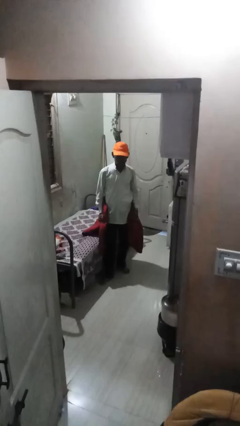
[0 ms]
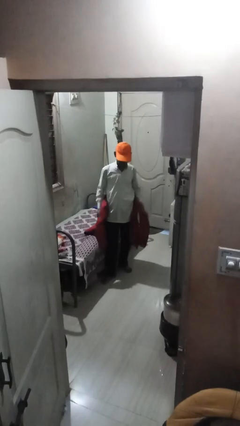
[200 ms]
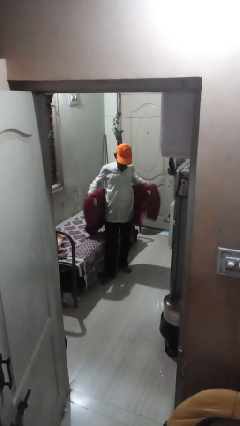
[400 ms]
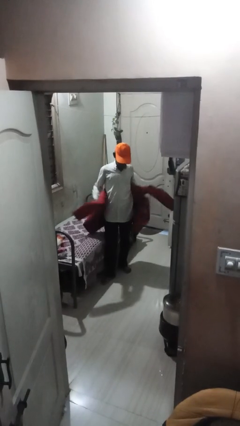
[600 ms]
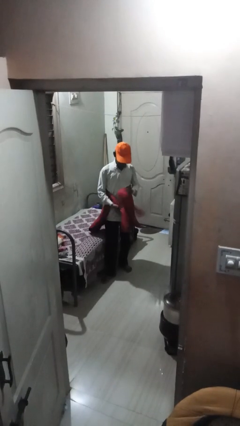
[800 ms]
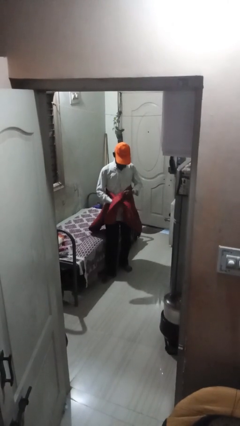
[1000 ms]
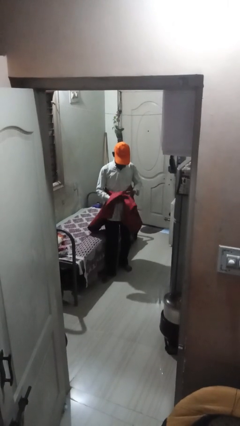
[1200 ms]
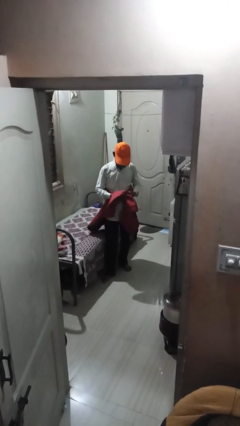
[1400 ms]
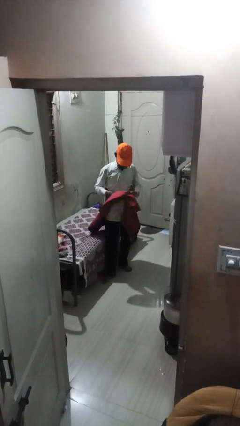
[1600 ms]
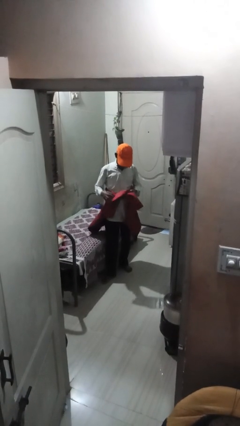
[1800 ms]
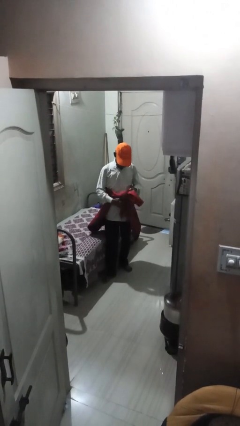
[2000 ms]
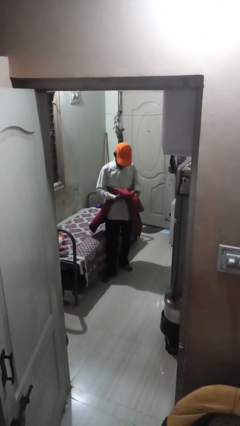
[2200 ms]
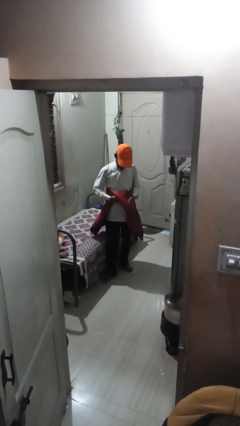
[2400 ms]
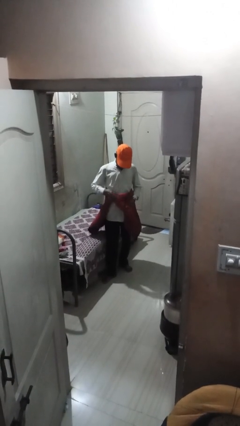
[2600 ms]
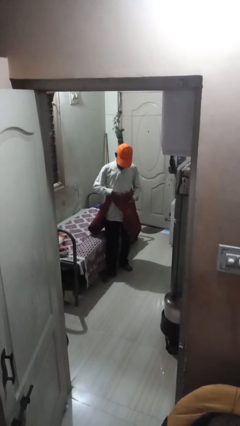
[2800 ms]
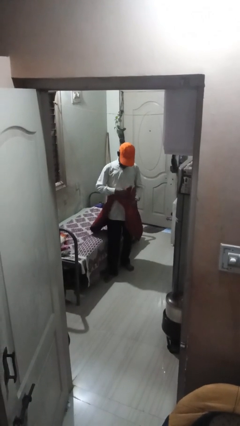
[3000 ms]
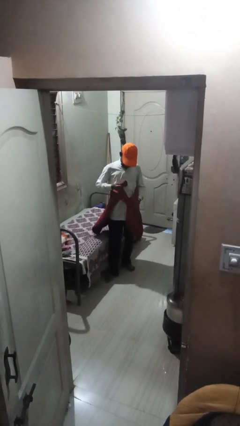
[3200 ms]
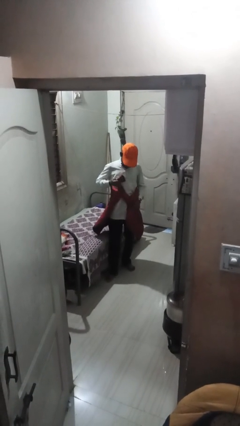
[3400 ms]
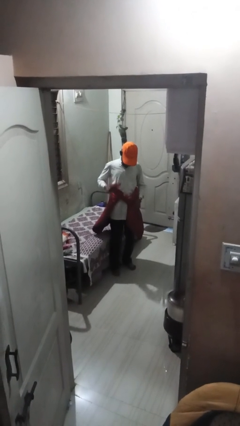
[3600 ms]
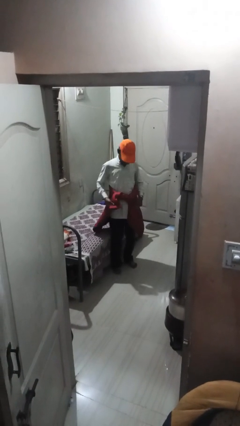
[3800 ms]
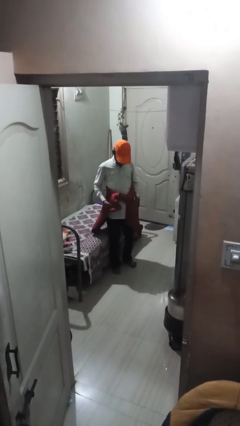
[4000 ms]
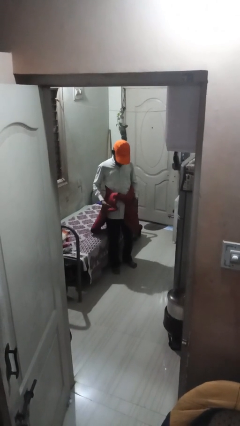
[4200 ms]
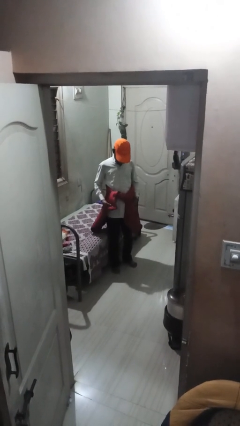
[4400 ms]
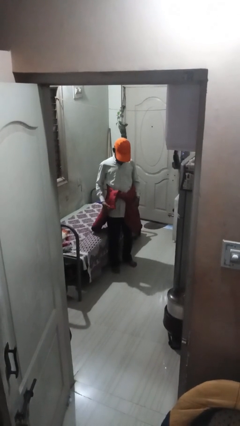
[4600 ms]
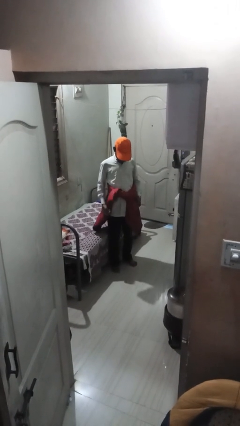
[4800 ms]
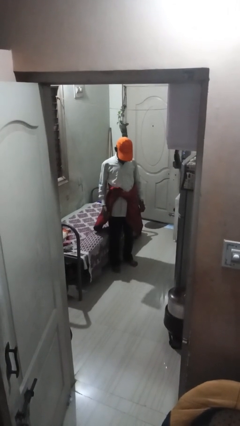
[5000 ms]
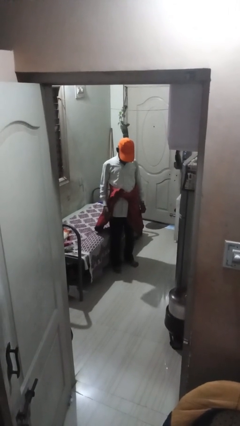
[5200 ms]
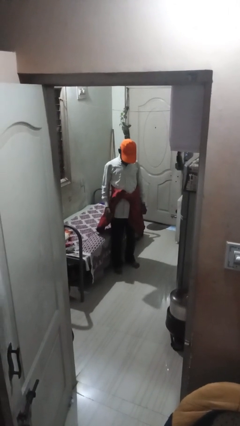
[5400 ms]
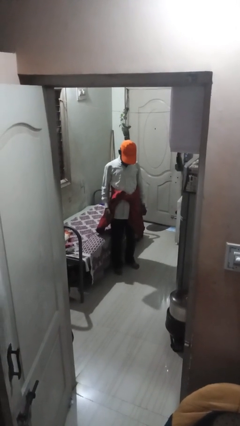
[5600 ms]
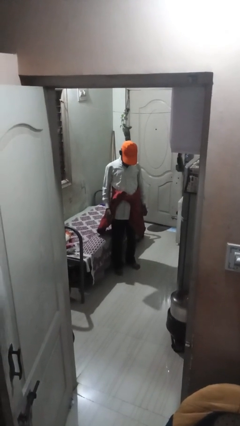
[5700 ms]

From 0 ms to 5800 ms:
person ties jacket around waist

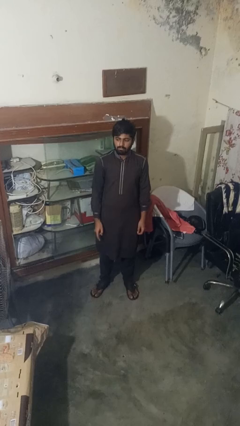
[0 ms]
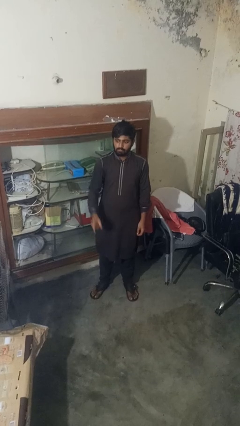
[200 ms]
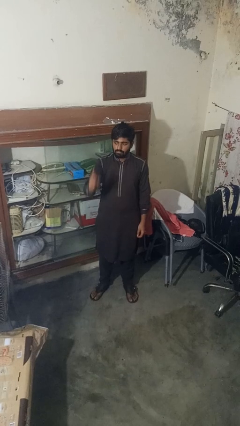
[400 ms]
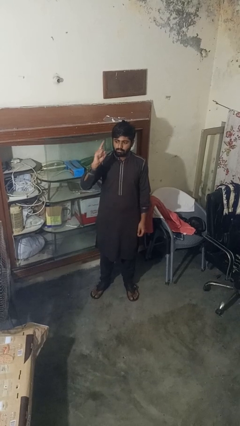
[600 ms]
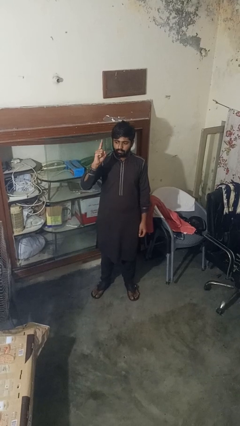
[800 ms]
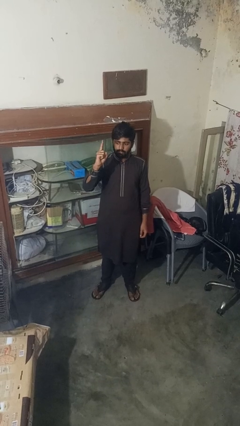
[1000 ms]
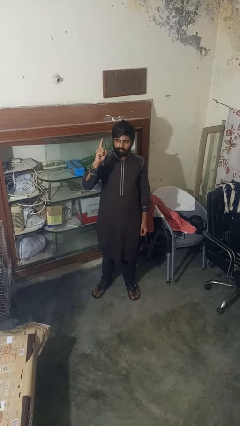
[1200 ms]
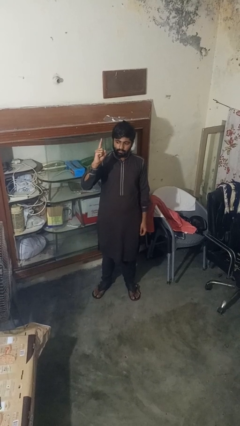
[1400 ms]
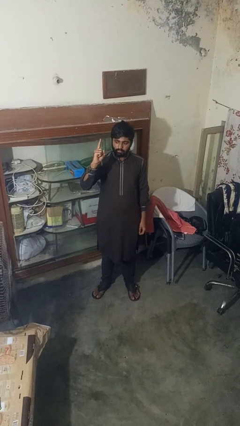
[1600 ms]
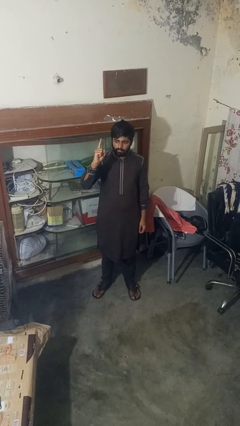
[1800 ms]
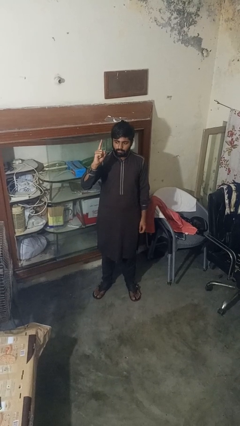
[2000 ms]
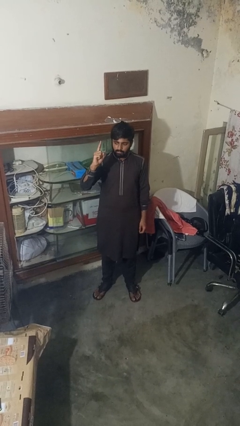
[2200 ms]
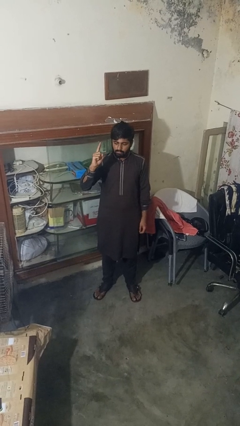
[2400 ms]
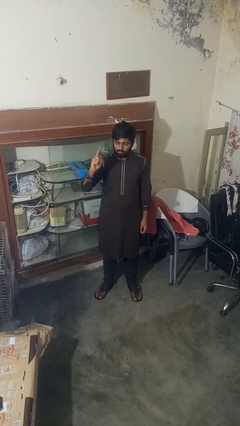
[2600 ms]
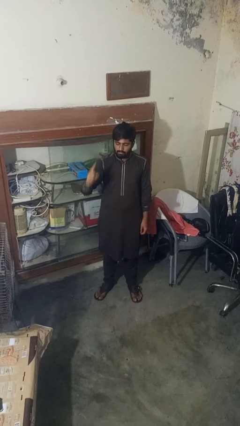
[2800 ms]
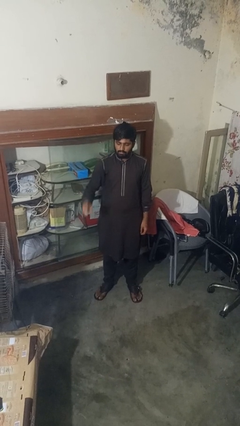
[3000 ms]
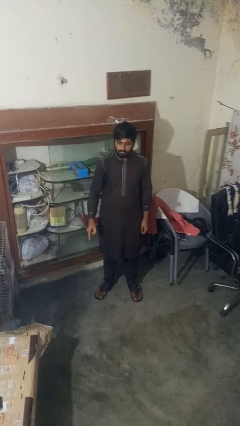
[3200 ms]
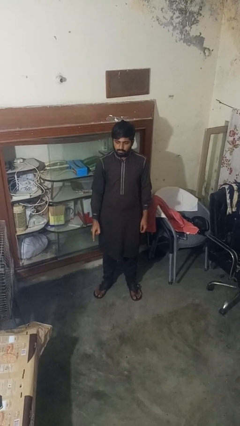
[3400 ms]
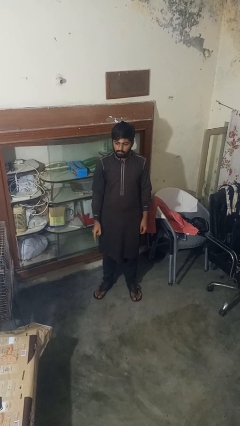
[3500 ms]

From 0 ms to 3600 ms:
person gestures number one

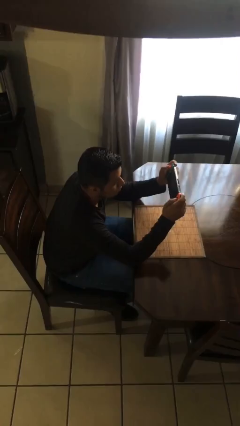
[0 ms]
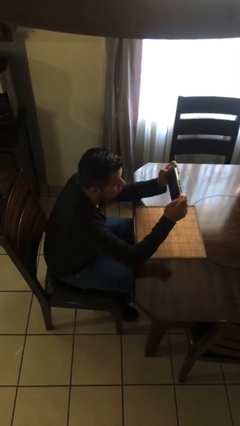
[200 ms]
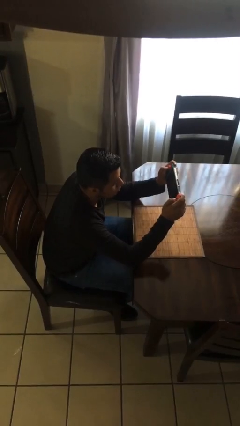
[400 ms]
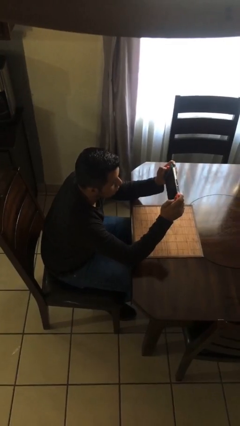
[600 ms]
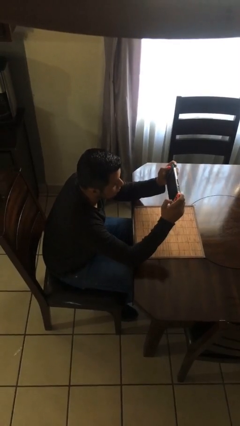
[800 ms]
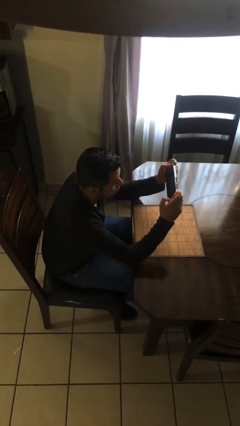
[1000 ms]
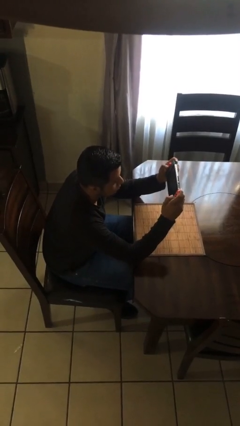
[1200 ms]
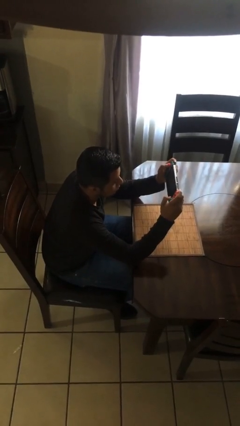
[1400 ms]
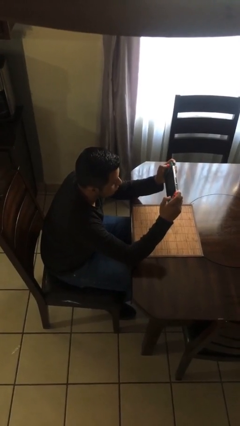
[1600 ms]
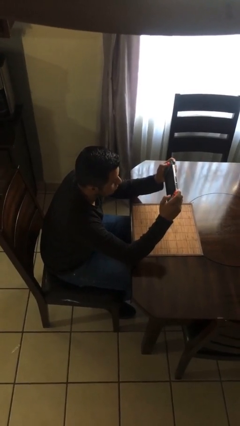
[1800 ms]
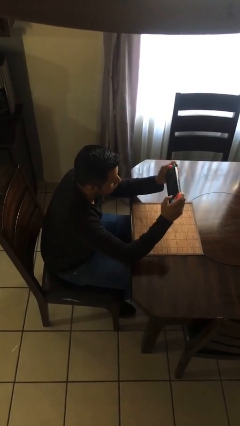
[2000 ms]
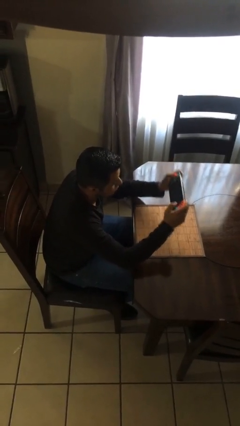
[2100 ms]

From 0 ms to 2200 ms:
person interacts with handheld game

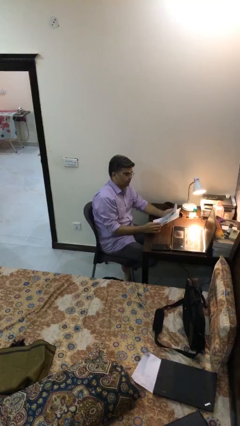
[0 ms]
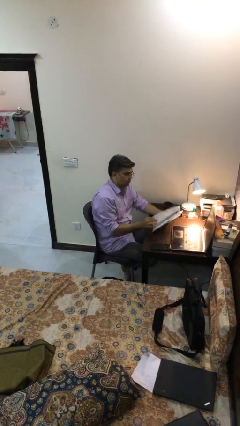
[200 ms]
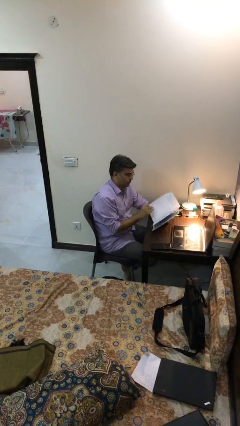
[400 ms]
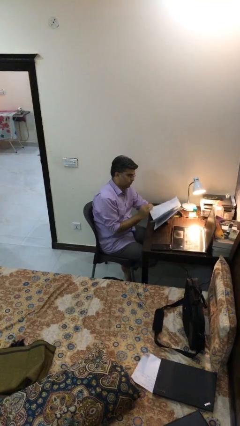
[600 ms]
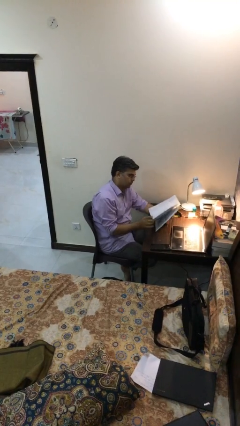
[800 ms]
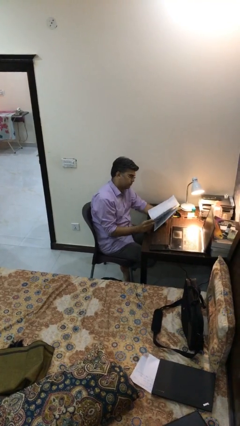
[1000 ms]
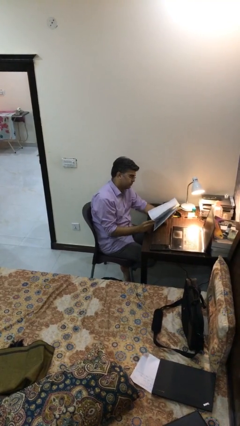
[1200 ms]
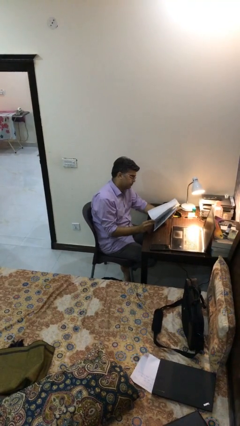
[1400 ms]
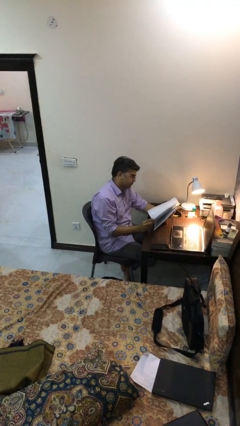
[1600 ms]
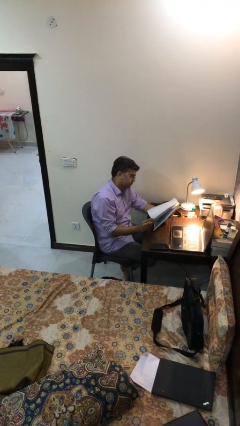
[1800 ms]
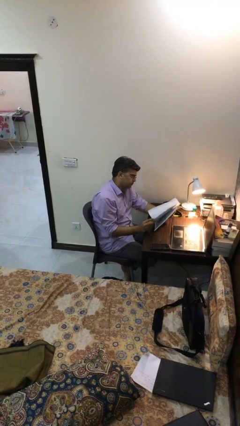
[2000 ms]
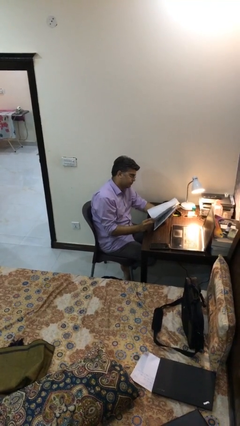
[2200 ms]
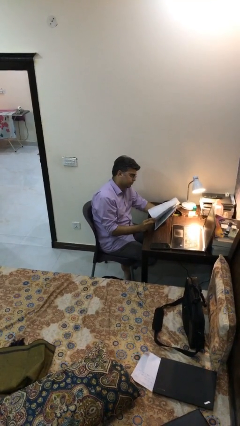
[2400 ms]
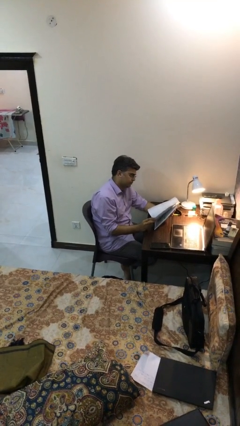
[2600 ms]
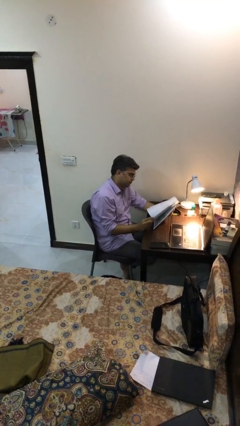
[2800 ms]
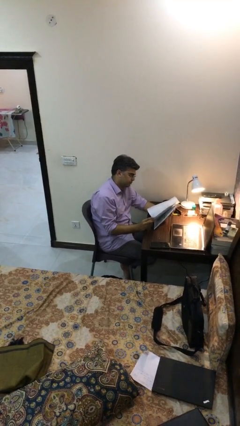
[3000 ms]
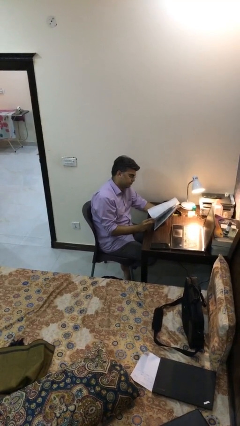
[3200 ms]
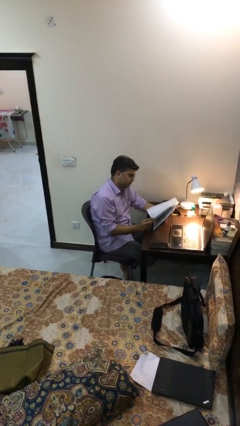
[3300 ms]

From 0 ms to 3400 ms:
person reads document

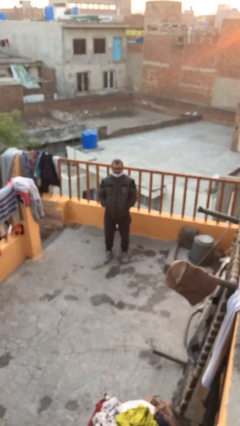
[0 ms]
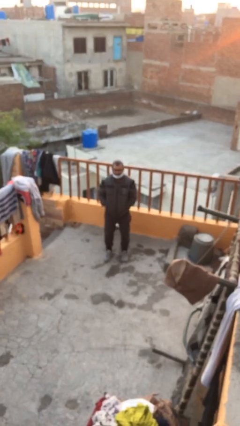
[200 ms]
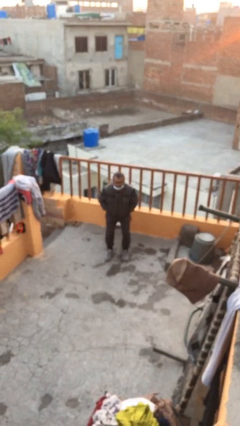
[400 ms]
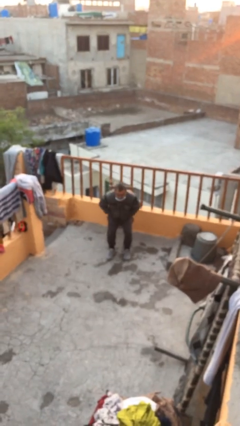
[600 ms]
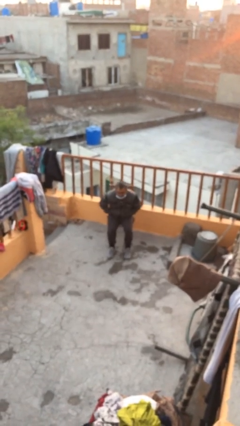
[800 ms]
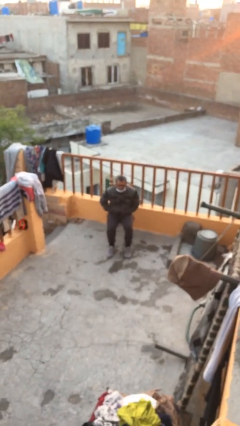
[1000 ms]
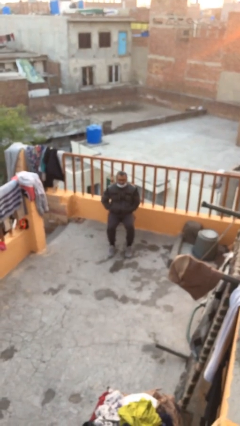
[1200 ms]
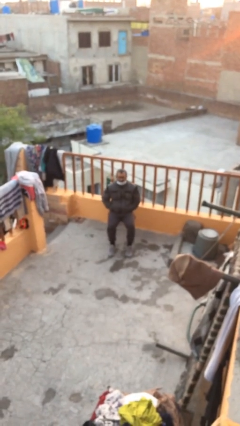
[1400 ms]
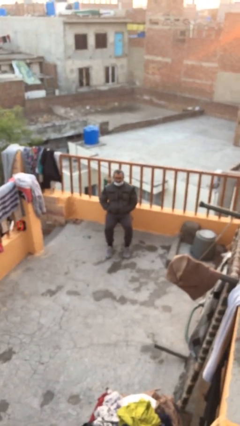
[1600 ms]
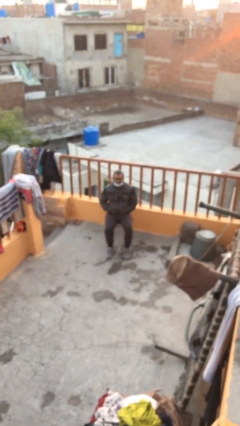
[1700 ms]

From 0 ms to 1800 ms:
person sits down
